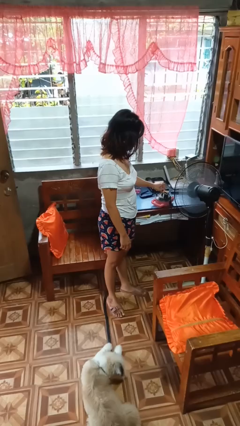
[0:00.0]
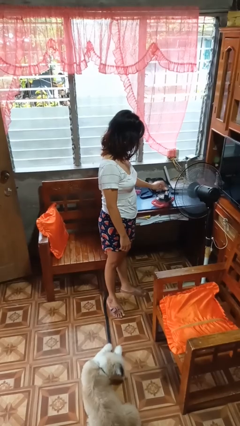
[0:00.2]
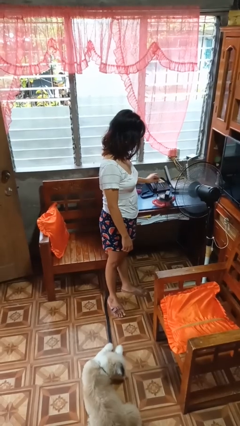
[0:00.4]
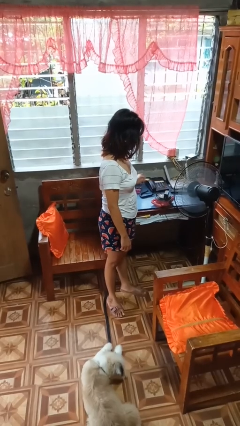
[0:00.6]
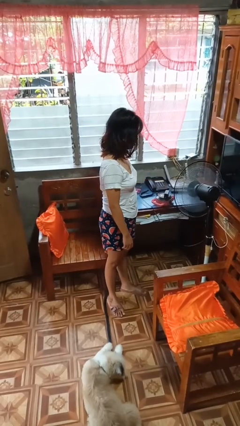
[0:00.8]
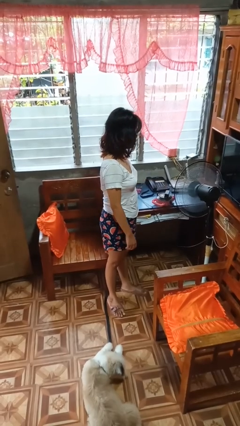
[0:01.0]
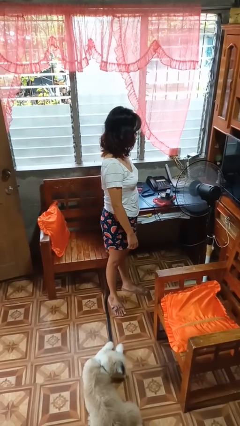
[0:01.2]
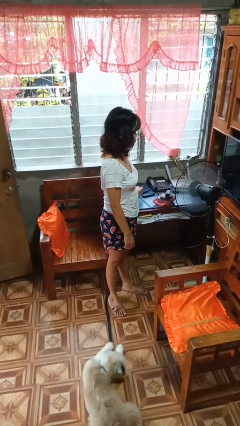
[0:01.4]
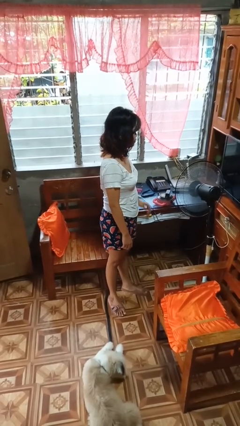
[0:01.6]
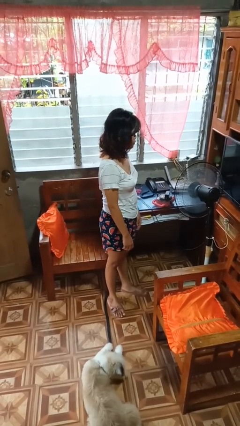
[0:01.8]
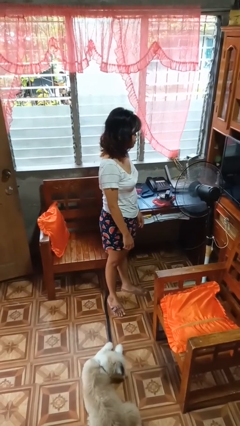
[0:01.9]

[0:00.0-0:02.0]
person unplugs from electrical socket

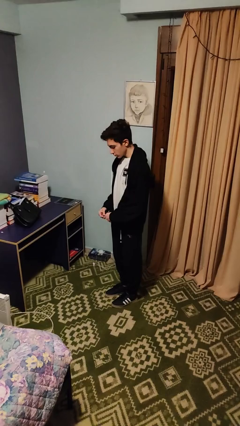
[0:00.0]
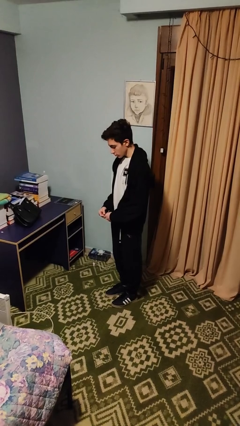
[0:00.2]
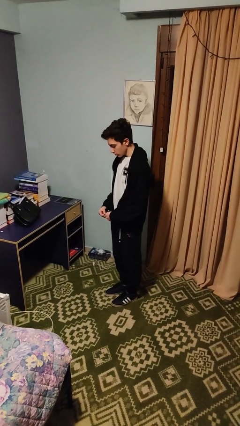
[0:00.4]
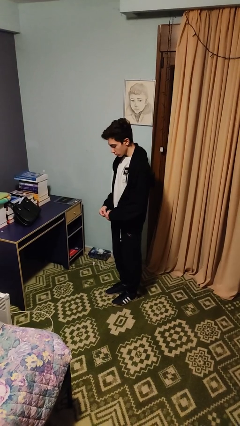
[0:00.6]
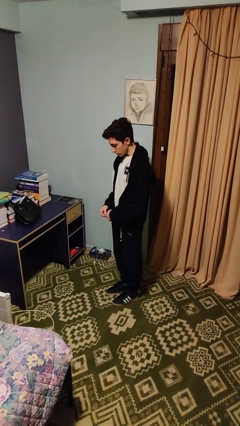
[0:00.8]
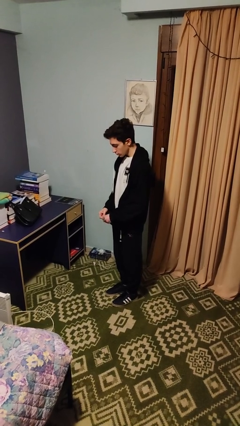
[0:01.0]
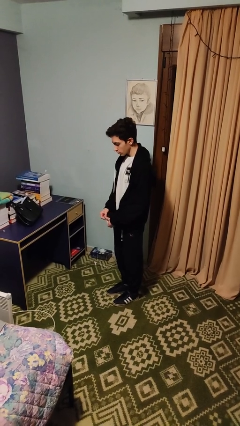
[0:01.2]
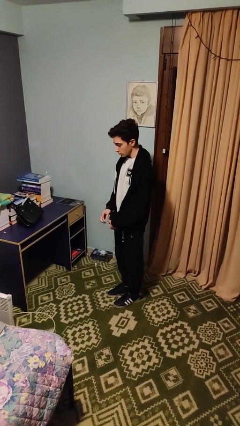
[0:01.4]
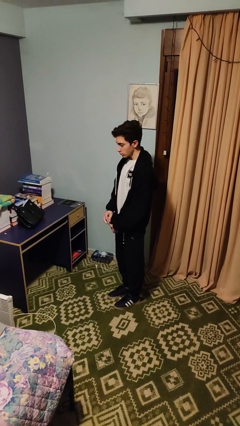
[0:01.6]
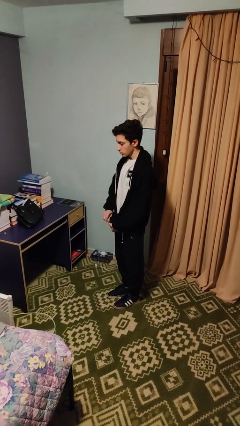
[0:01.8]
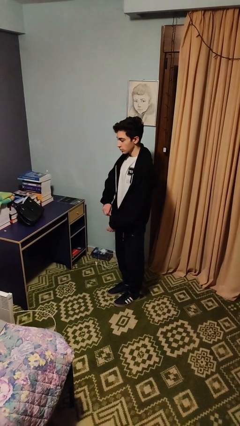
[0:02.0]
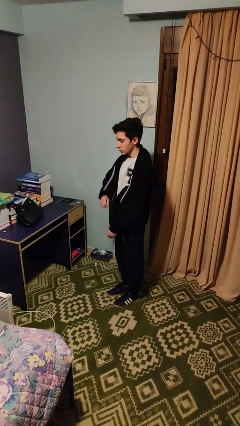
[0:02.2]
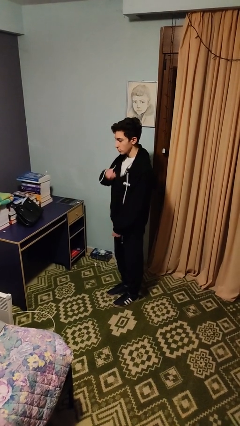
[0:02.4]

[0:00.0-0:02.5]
person zips up jacket

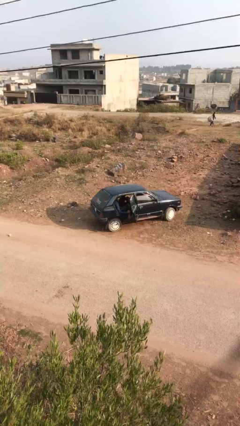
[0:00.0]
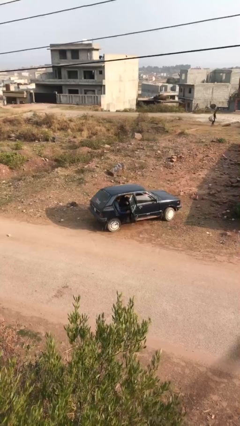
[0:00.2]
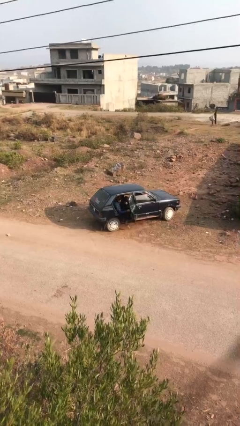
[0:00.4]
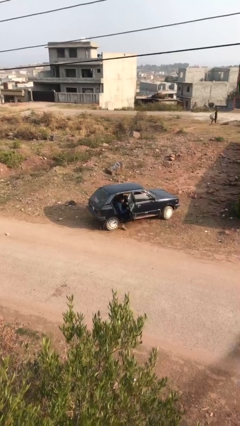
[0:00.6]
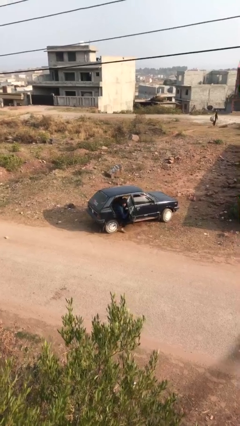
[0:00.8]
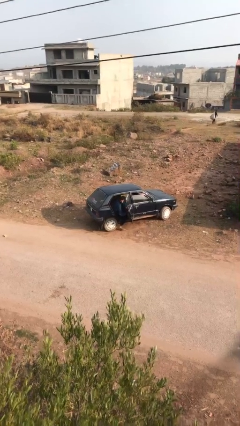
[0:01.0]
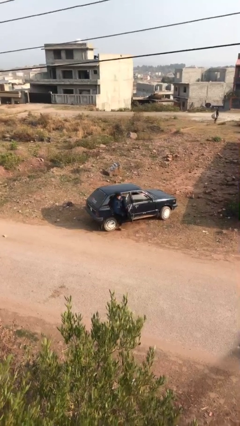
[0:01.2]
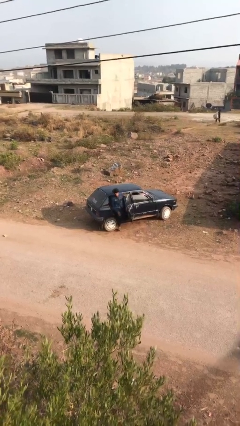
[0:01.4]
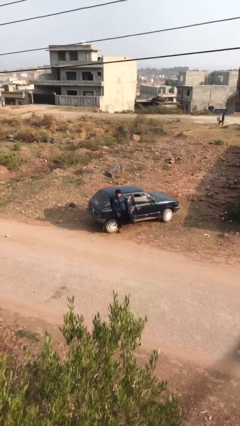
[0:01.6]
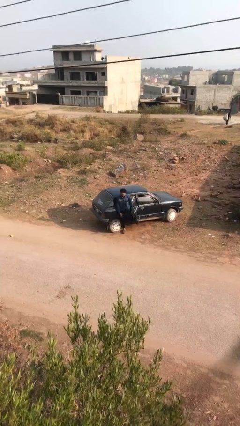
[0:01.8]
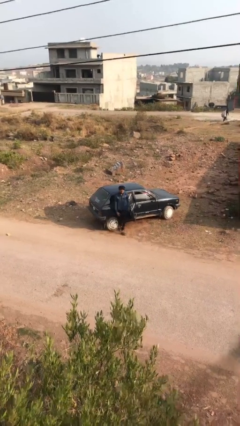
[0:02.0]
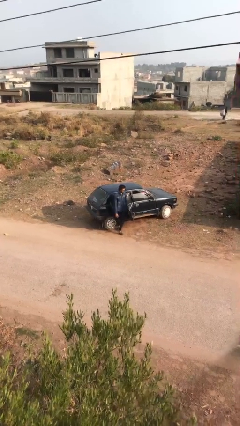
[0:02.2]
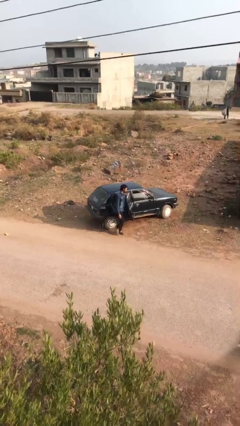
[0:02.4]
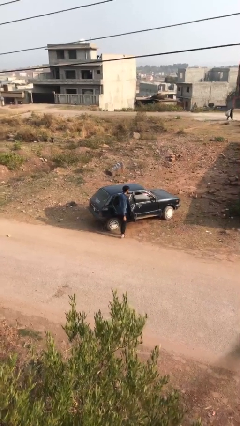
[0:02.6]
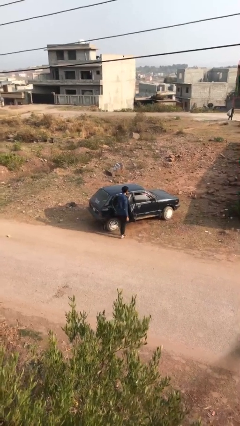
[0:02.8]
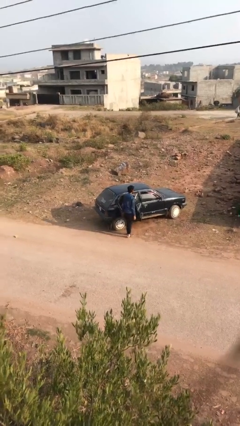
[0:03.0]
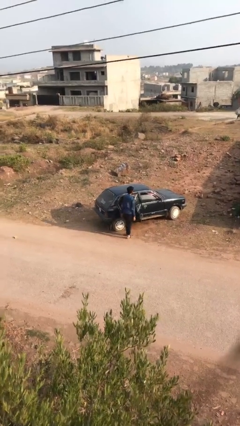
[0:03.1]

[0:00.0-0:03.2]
person exits car

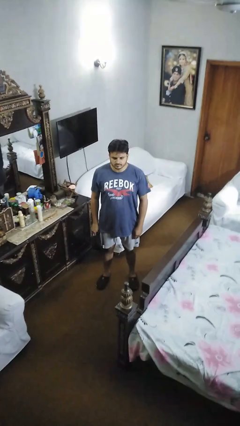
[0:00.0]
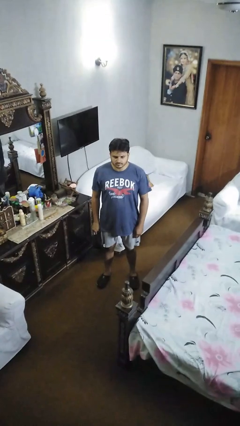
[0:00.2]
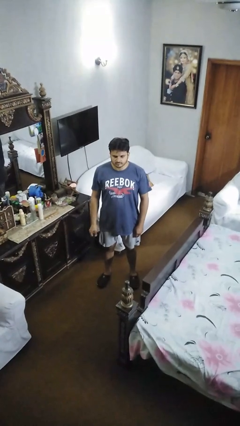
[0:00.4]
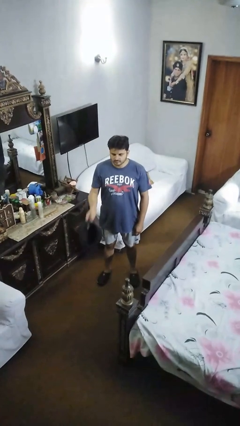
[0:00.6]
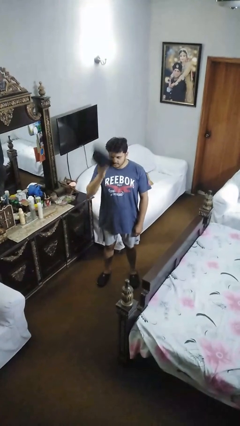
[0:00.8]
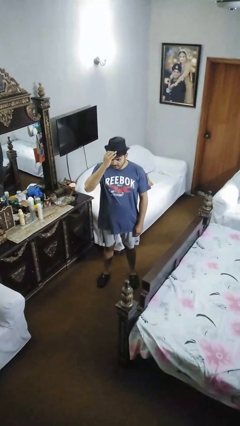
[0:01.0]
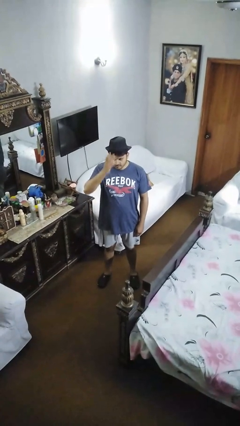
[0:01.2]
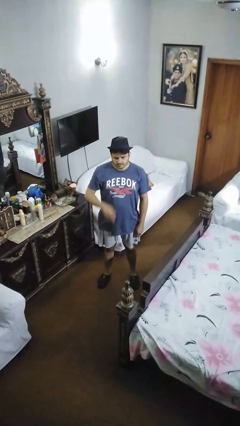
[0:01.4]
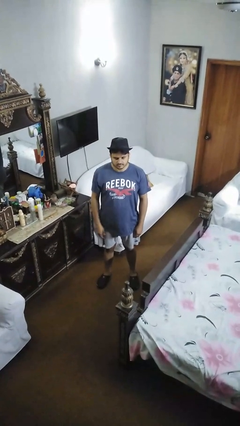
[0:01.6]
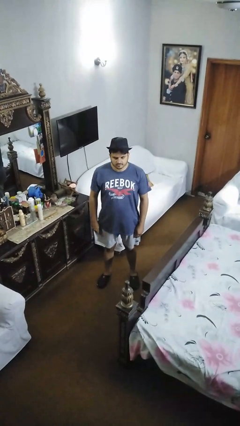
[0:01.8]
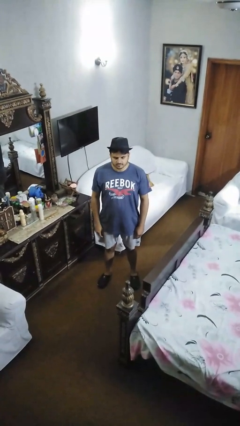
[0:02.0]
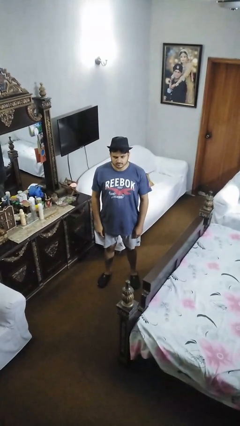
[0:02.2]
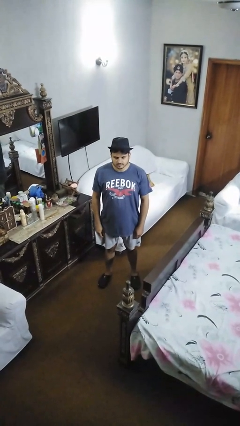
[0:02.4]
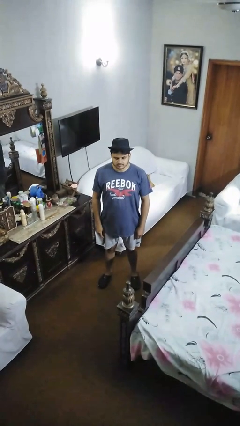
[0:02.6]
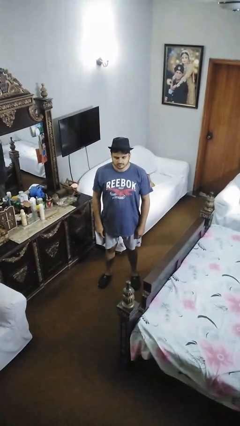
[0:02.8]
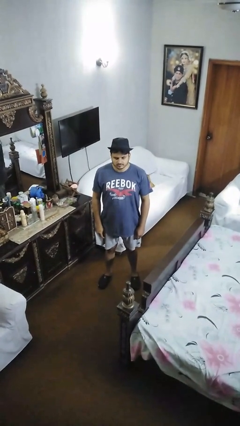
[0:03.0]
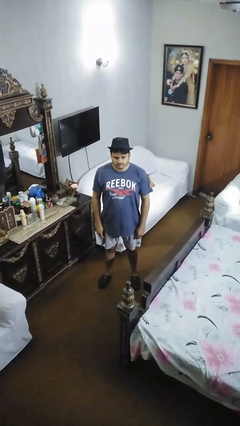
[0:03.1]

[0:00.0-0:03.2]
person puts on hat

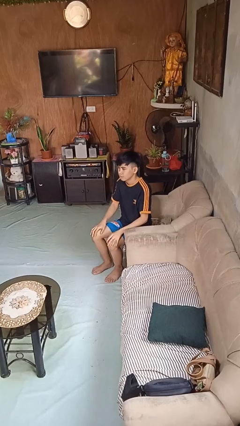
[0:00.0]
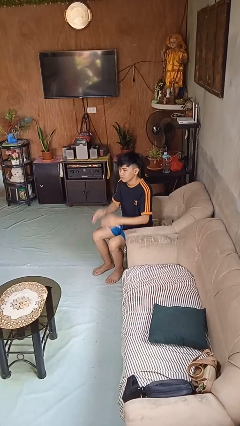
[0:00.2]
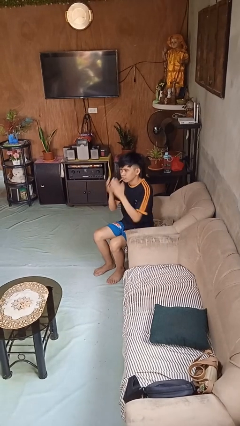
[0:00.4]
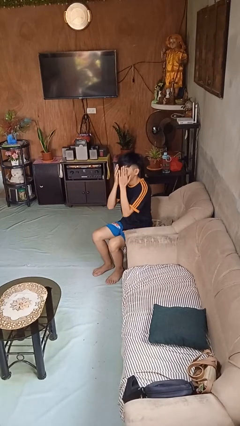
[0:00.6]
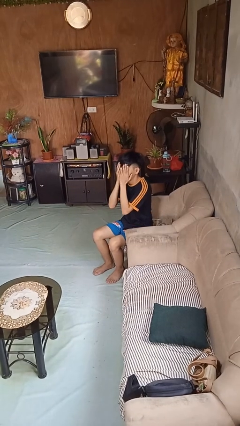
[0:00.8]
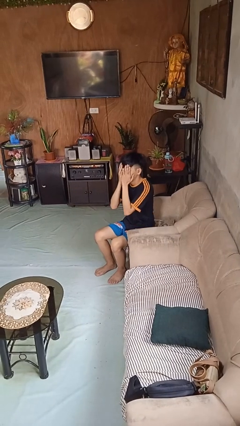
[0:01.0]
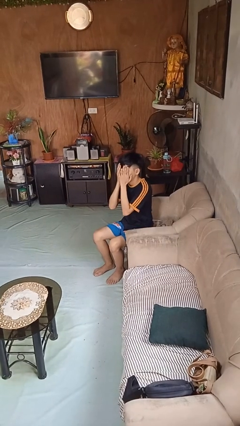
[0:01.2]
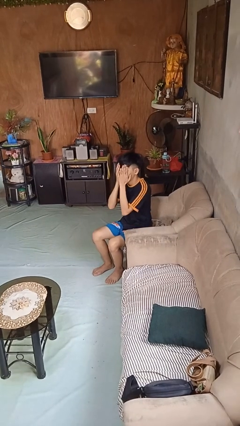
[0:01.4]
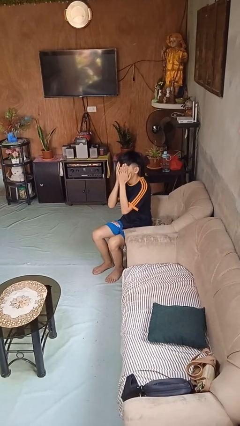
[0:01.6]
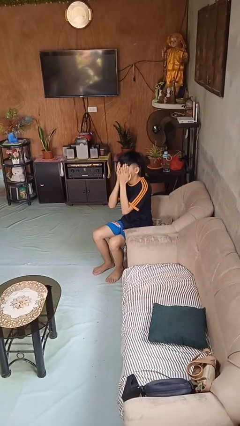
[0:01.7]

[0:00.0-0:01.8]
person covers face with hands

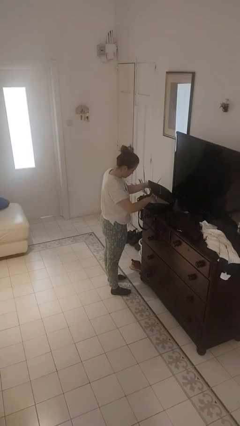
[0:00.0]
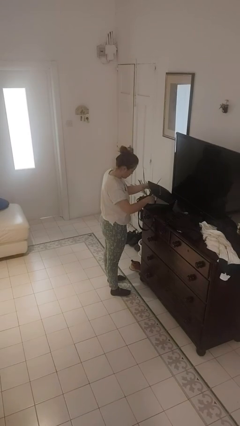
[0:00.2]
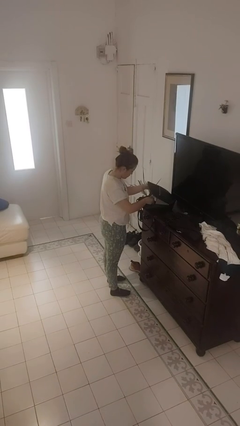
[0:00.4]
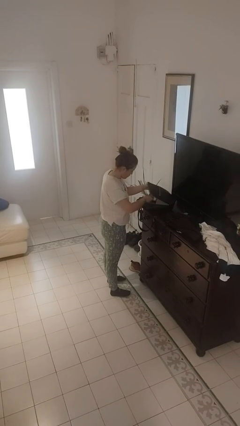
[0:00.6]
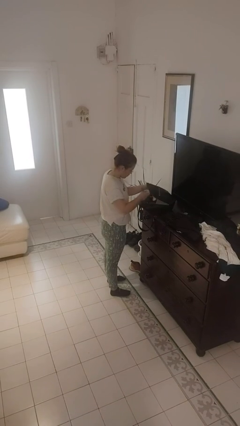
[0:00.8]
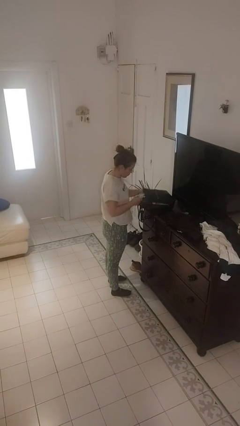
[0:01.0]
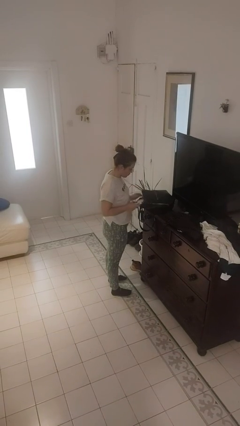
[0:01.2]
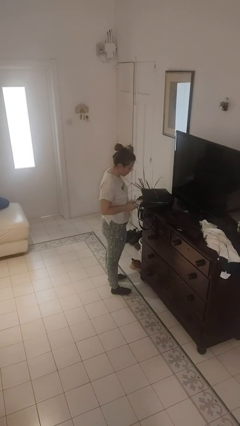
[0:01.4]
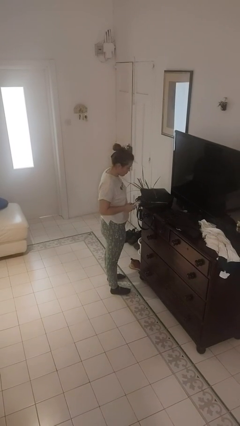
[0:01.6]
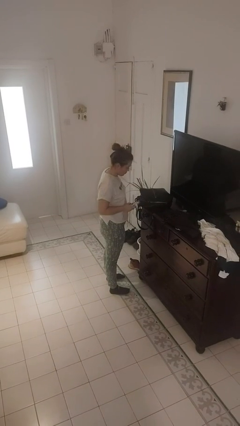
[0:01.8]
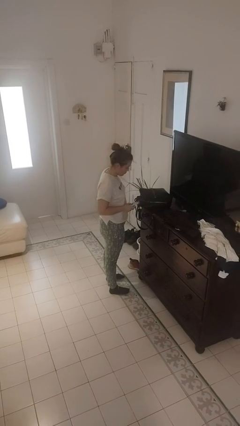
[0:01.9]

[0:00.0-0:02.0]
person takes object from purse

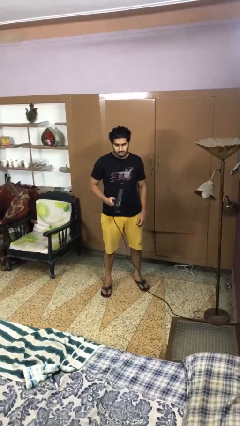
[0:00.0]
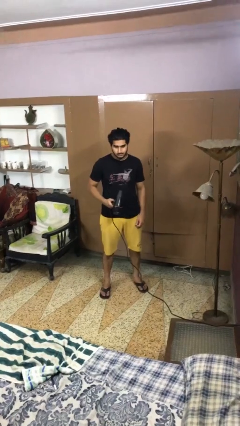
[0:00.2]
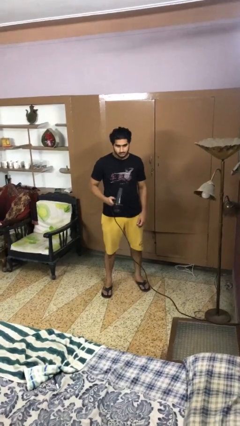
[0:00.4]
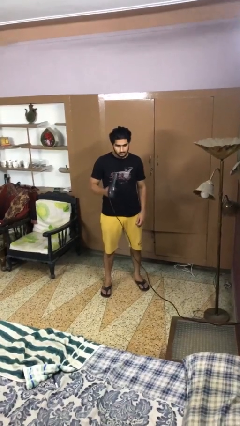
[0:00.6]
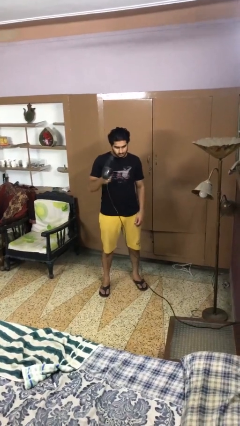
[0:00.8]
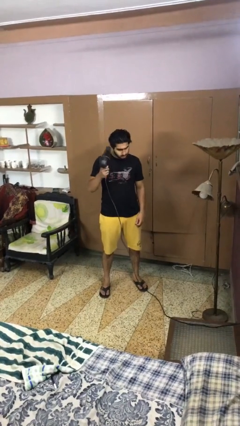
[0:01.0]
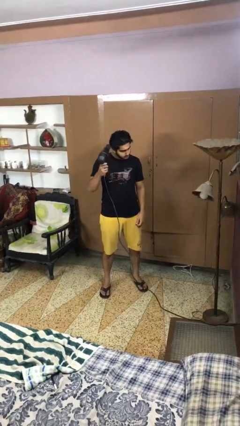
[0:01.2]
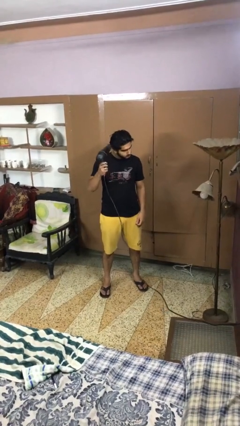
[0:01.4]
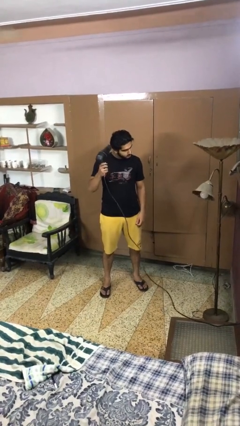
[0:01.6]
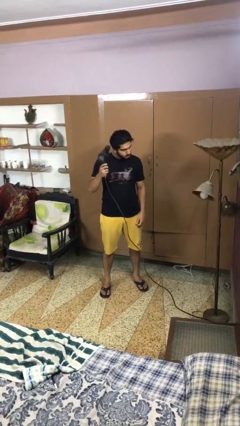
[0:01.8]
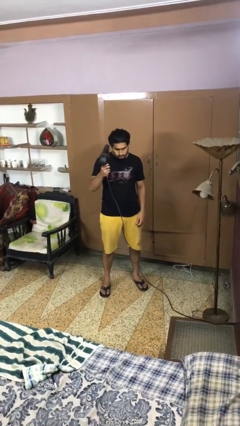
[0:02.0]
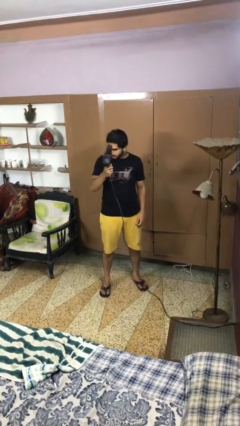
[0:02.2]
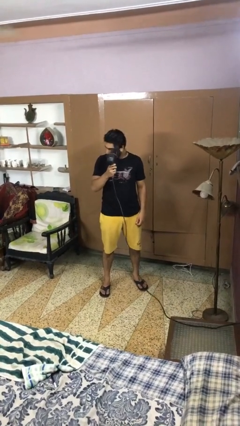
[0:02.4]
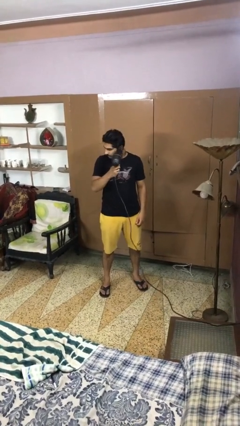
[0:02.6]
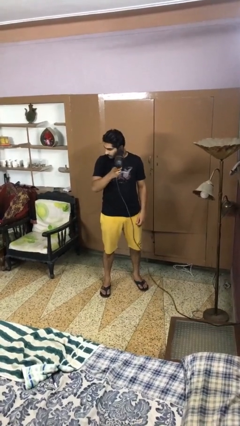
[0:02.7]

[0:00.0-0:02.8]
person dries hair with hairdryer
